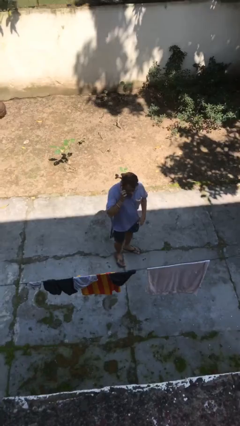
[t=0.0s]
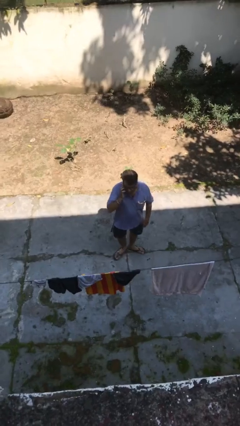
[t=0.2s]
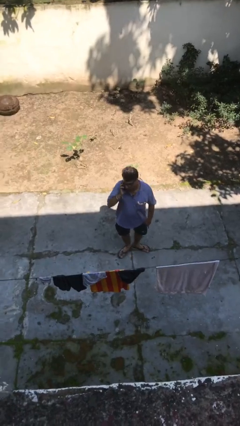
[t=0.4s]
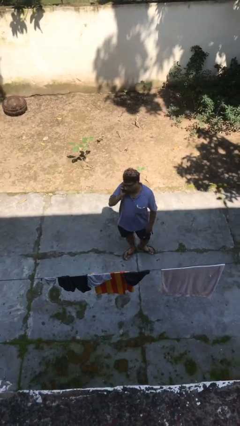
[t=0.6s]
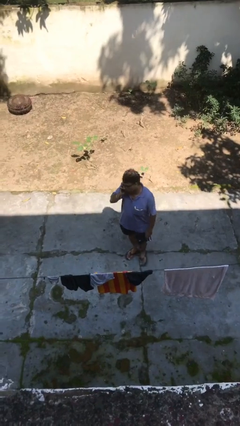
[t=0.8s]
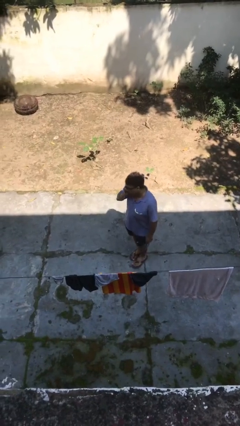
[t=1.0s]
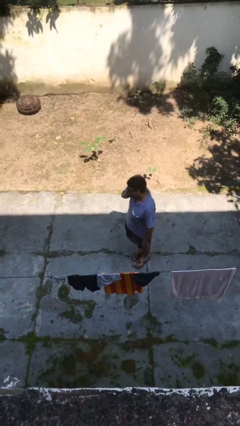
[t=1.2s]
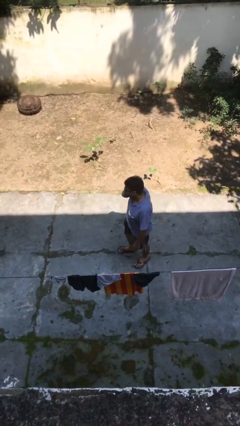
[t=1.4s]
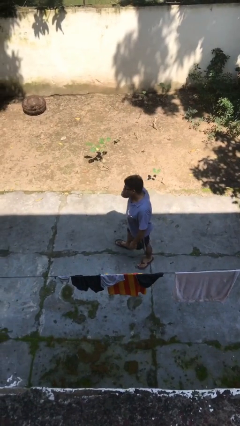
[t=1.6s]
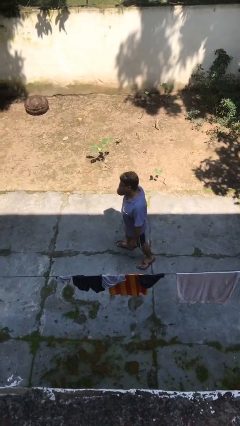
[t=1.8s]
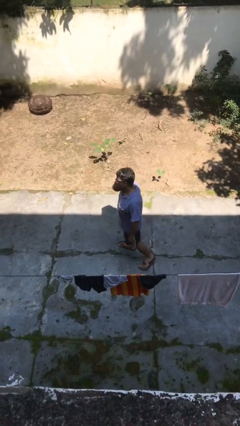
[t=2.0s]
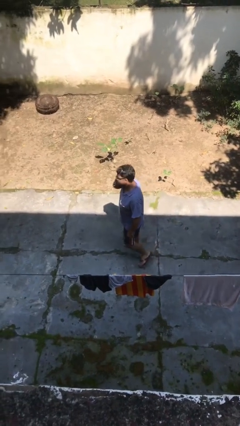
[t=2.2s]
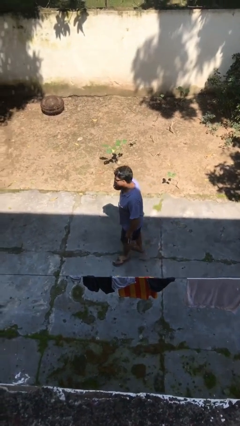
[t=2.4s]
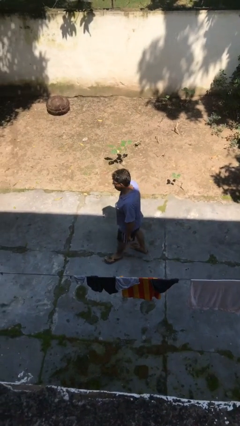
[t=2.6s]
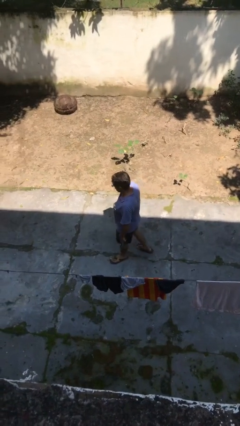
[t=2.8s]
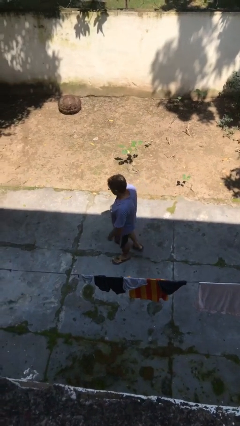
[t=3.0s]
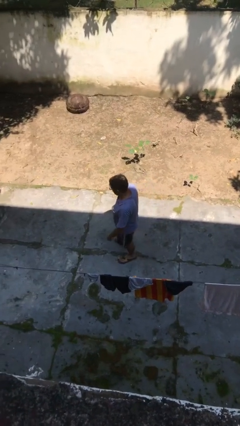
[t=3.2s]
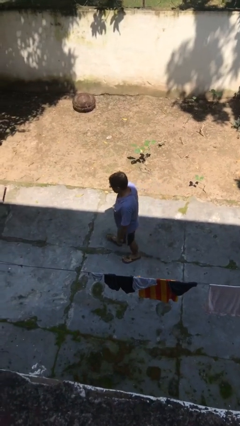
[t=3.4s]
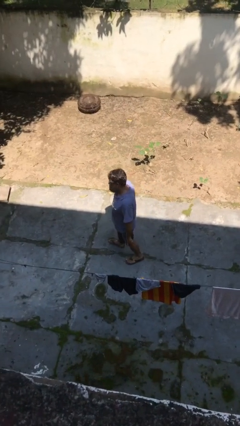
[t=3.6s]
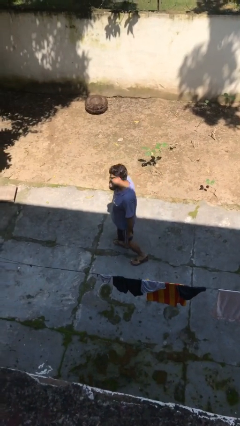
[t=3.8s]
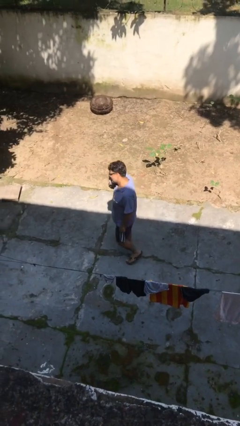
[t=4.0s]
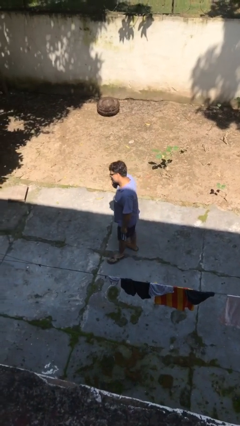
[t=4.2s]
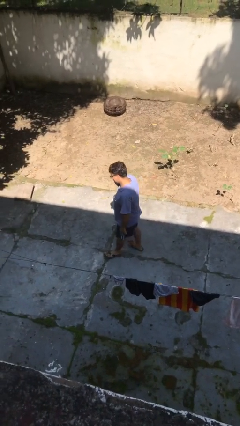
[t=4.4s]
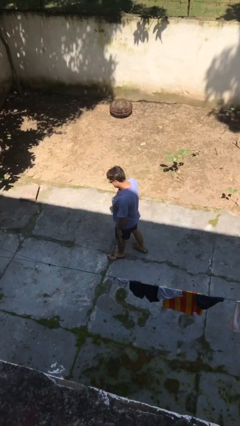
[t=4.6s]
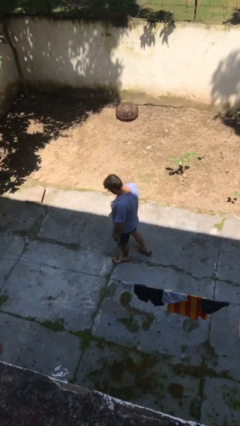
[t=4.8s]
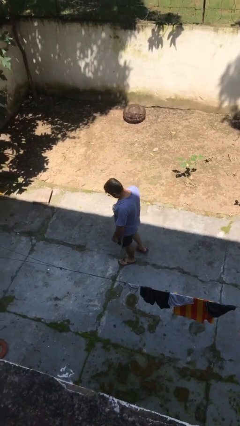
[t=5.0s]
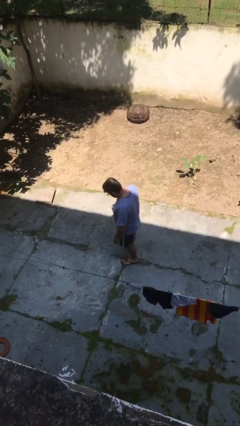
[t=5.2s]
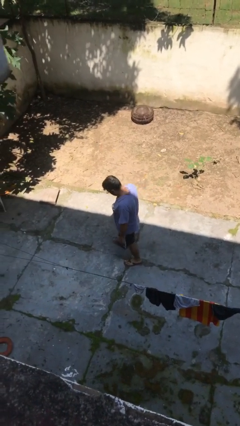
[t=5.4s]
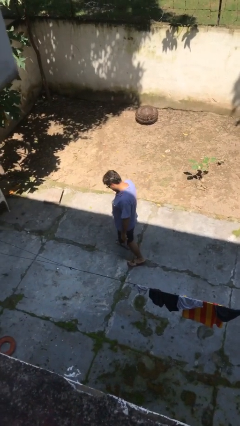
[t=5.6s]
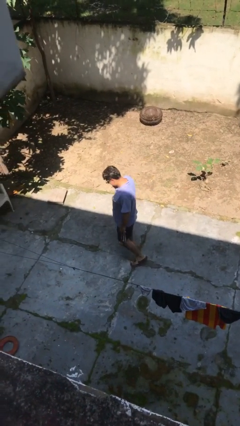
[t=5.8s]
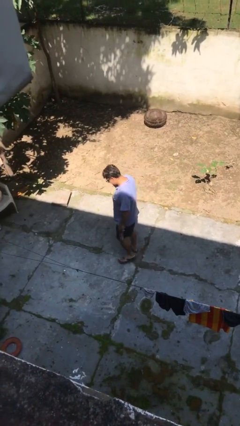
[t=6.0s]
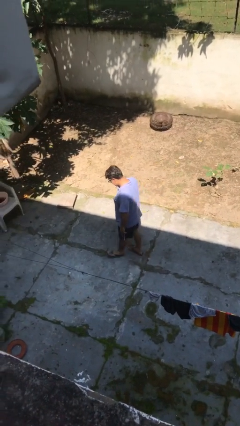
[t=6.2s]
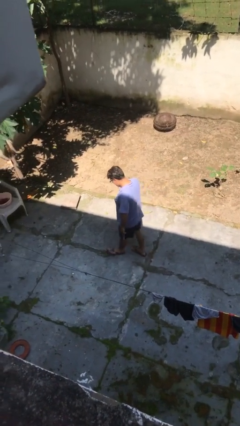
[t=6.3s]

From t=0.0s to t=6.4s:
person talks on phone

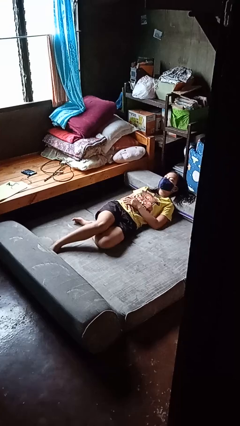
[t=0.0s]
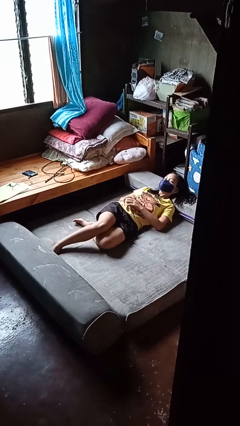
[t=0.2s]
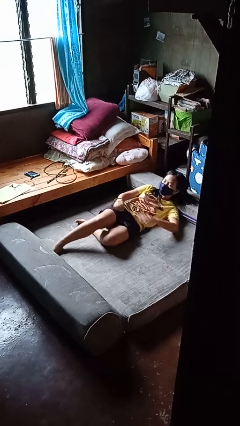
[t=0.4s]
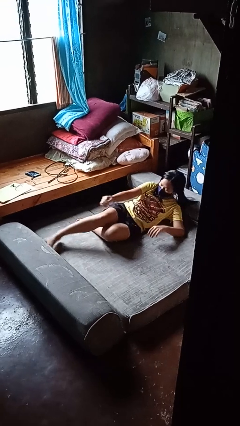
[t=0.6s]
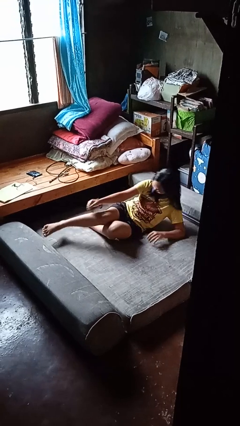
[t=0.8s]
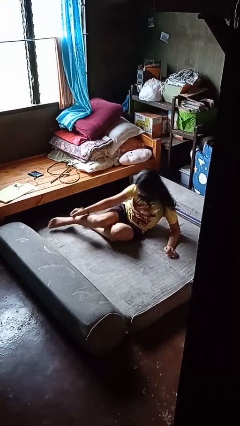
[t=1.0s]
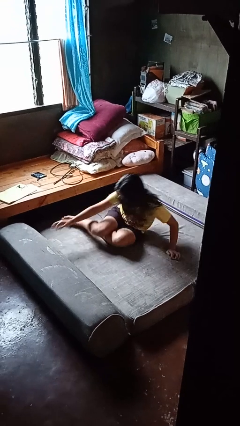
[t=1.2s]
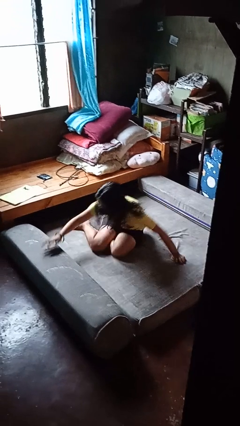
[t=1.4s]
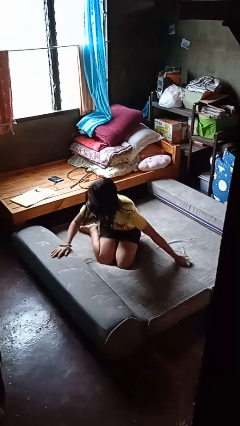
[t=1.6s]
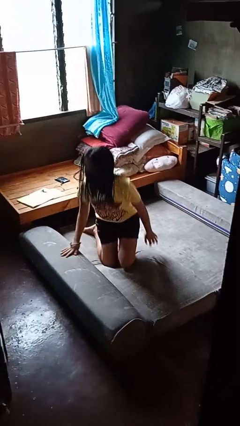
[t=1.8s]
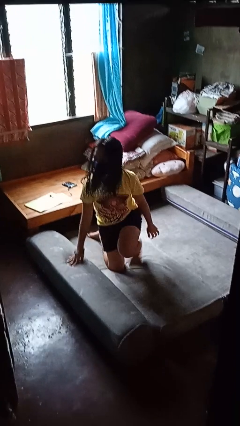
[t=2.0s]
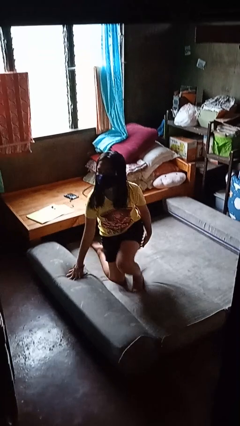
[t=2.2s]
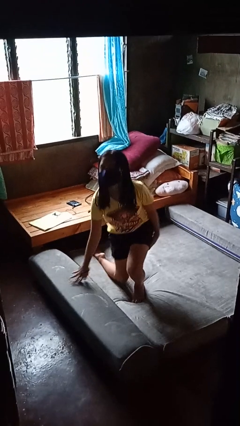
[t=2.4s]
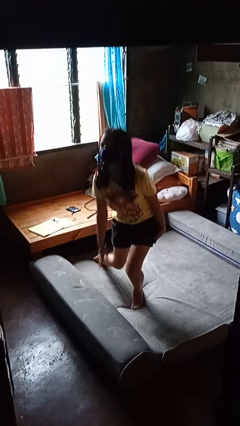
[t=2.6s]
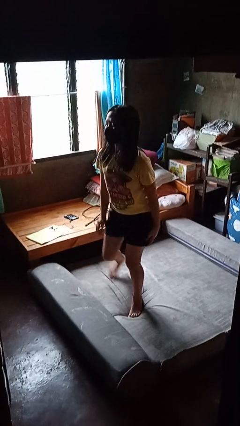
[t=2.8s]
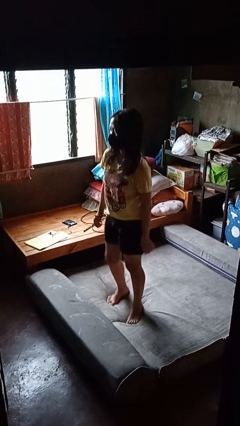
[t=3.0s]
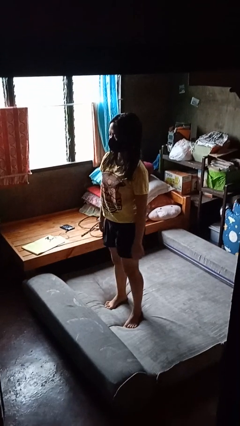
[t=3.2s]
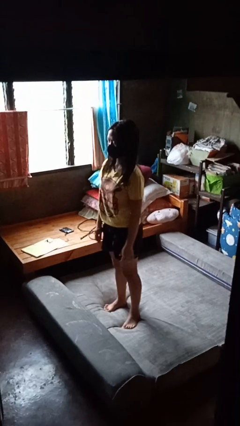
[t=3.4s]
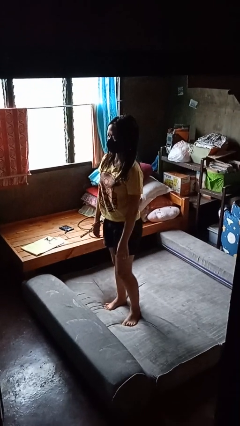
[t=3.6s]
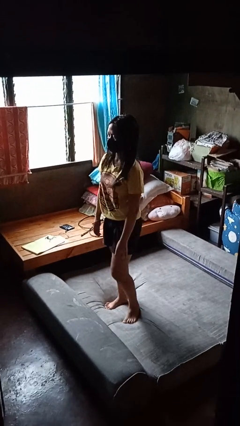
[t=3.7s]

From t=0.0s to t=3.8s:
person stands up

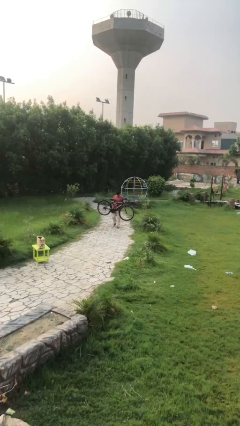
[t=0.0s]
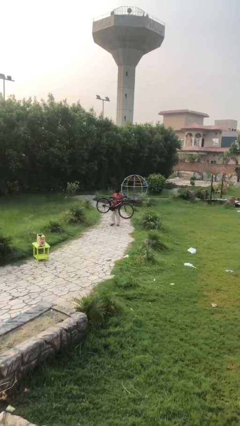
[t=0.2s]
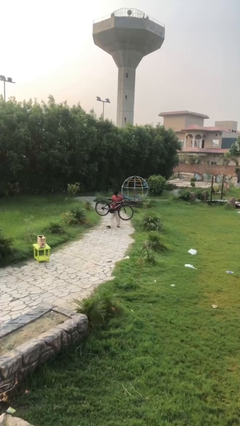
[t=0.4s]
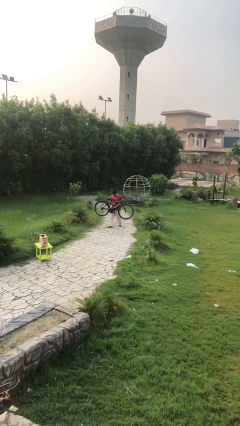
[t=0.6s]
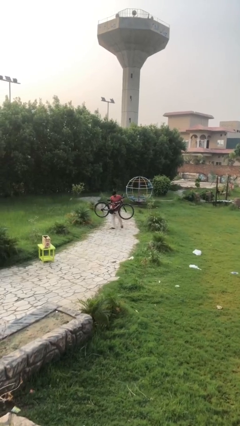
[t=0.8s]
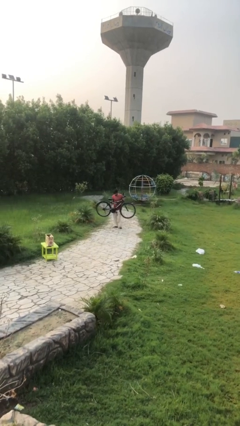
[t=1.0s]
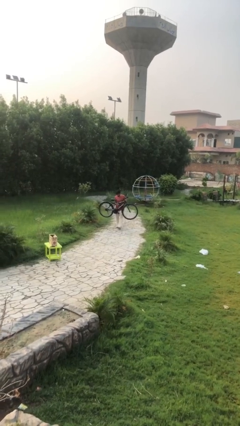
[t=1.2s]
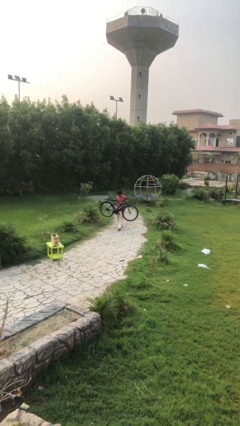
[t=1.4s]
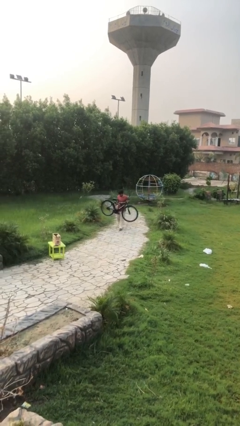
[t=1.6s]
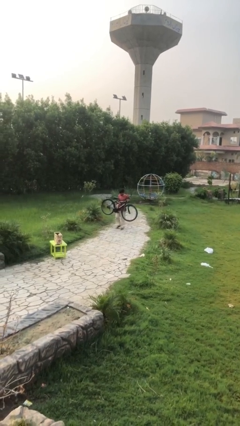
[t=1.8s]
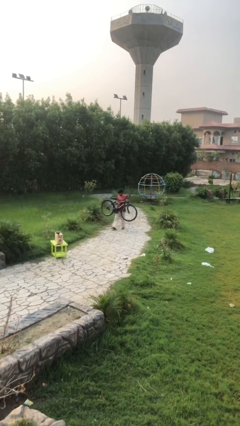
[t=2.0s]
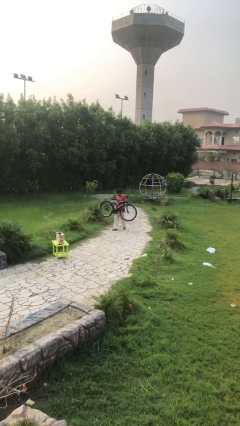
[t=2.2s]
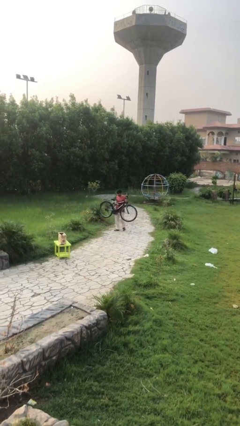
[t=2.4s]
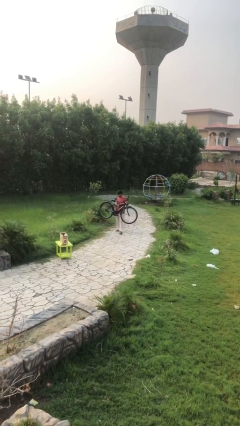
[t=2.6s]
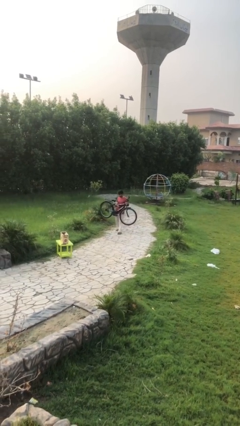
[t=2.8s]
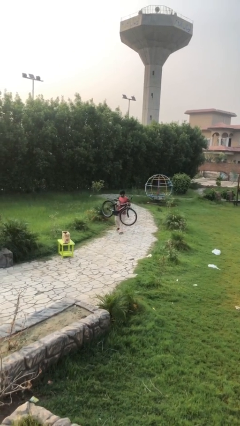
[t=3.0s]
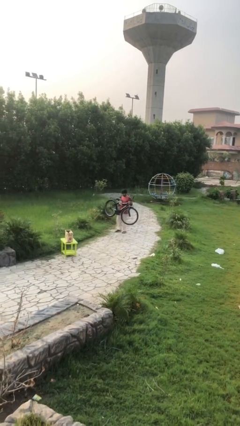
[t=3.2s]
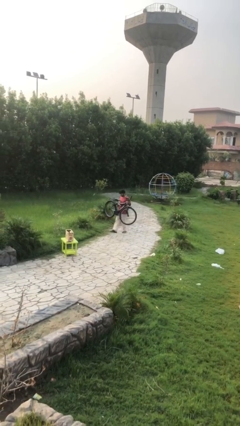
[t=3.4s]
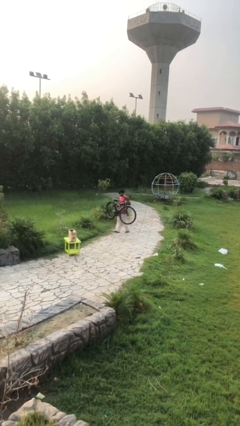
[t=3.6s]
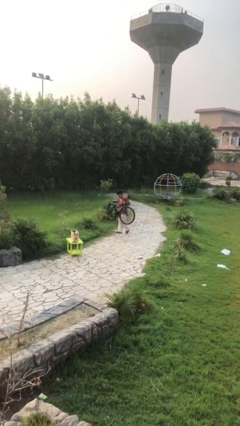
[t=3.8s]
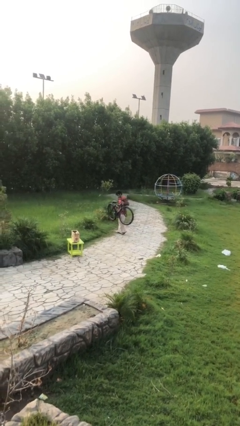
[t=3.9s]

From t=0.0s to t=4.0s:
person carries heavy object

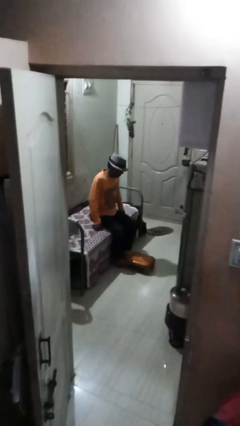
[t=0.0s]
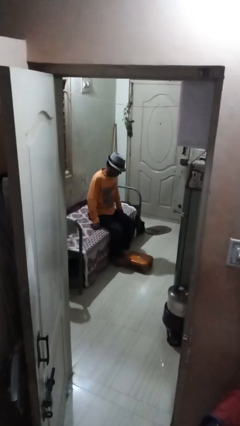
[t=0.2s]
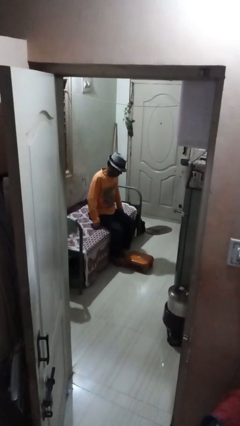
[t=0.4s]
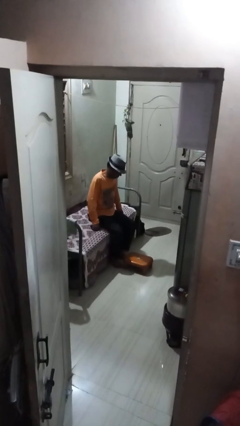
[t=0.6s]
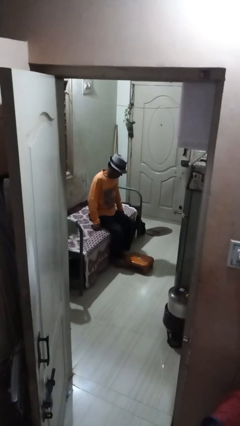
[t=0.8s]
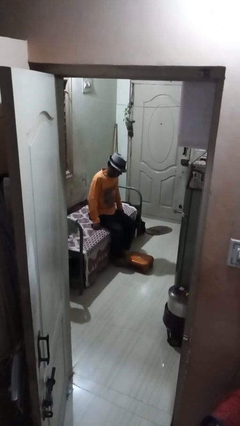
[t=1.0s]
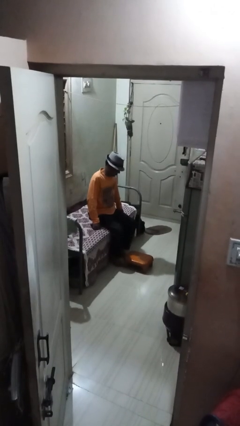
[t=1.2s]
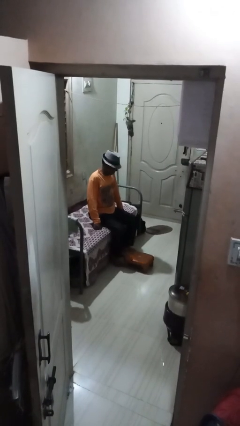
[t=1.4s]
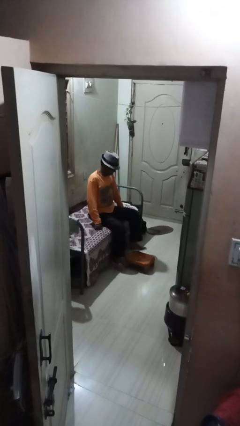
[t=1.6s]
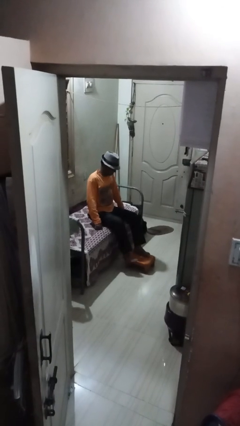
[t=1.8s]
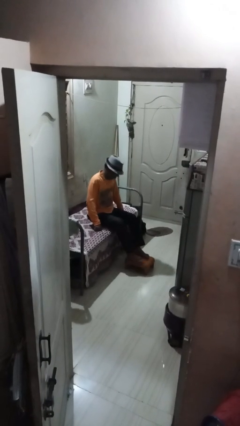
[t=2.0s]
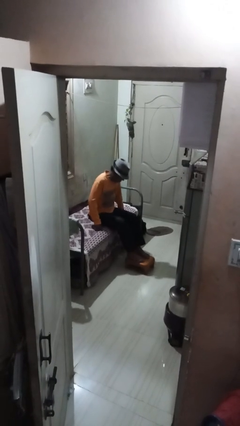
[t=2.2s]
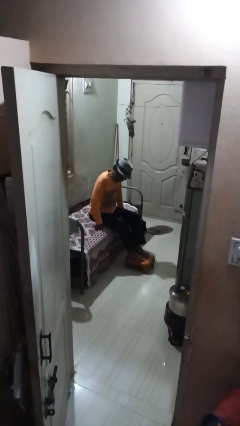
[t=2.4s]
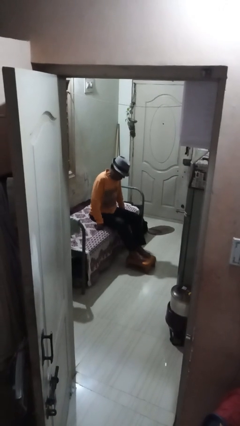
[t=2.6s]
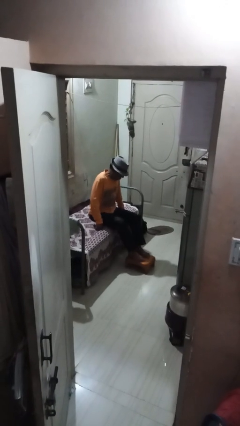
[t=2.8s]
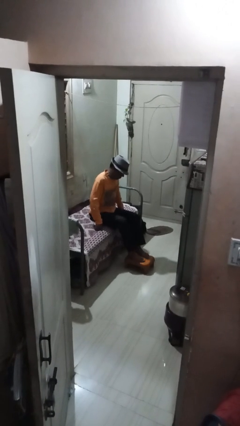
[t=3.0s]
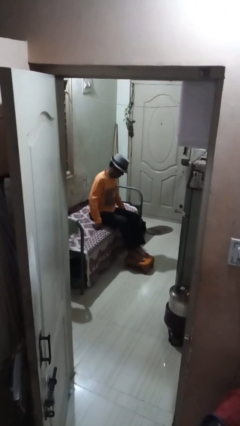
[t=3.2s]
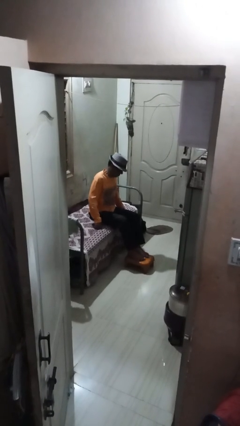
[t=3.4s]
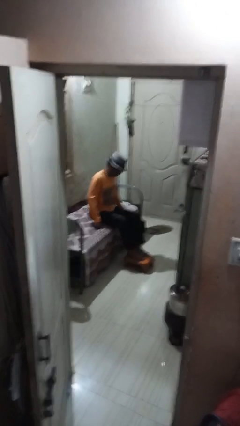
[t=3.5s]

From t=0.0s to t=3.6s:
person puts feet up
